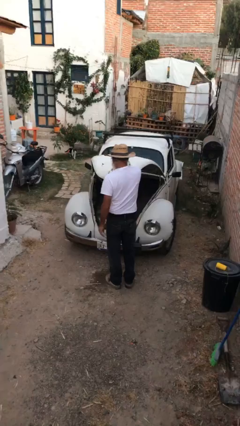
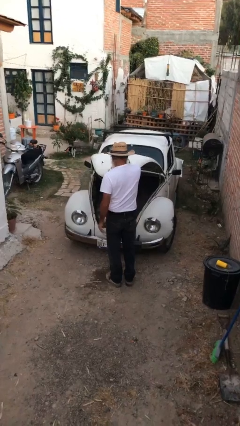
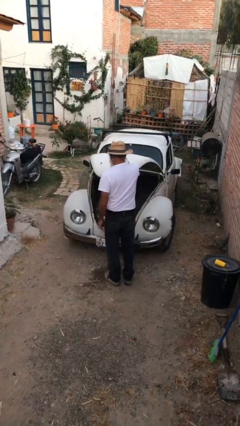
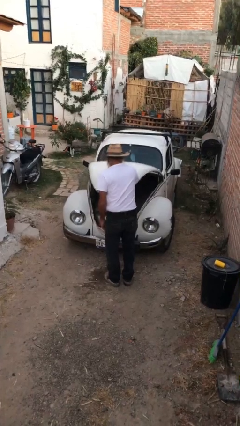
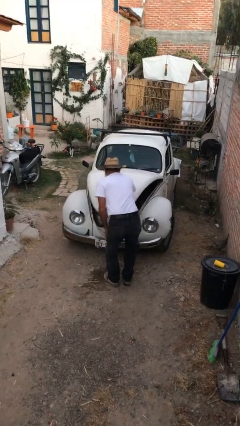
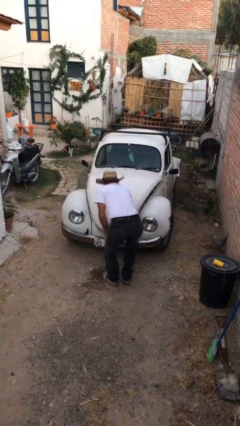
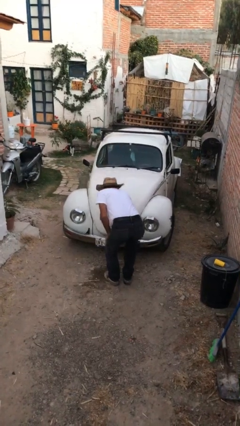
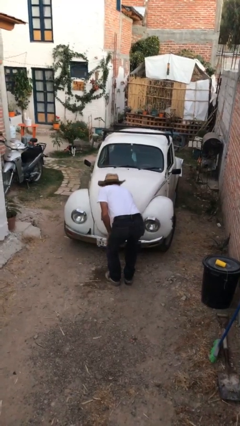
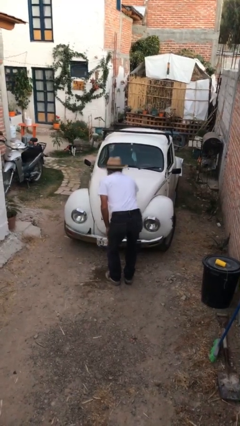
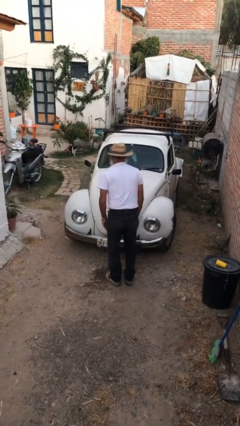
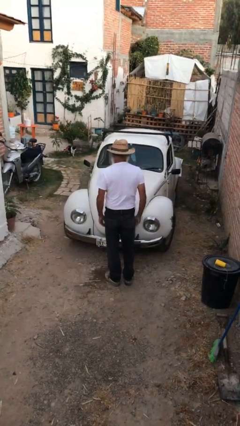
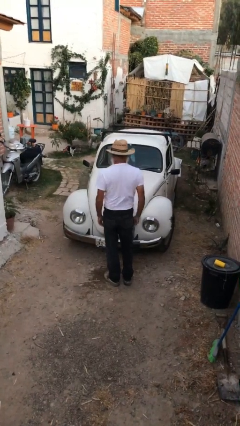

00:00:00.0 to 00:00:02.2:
person closes car trunk

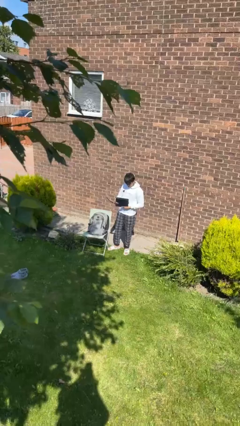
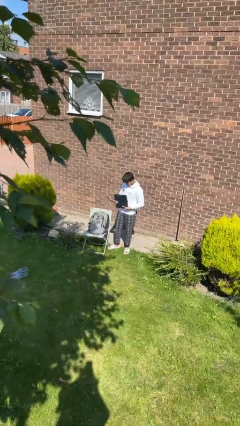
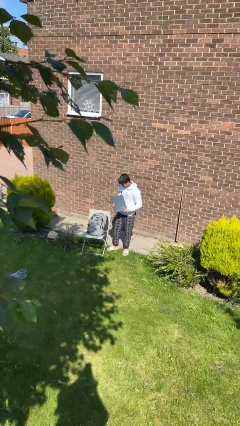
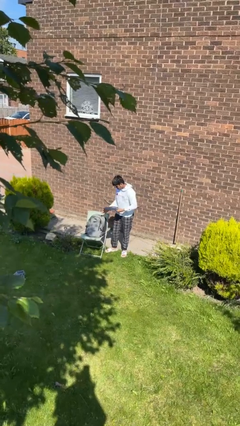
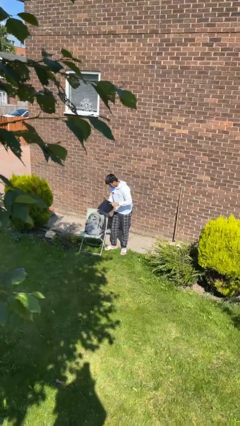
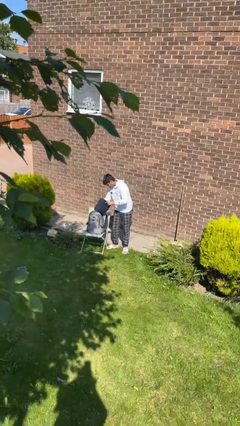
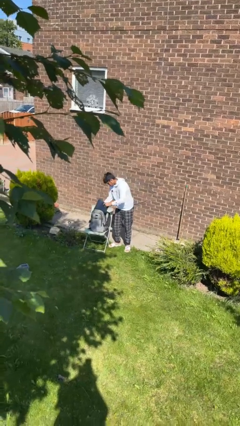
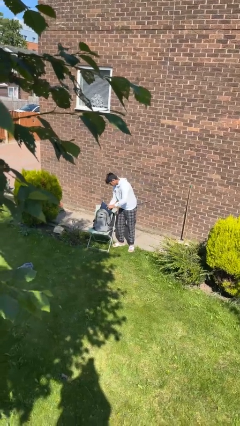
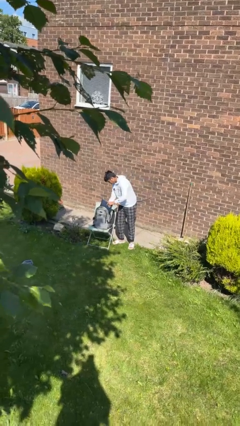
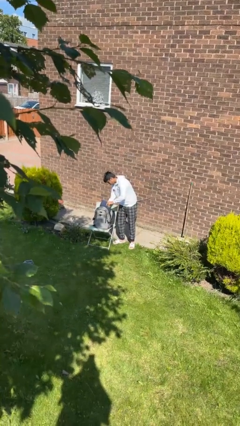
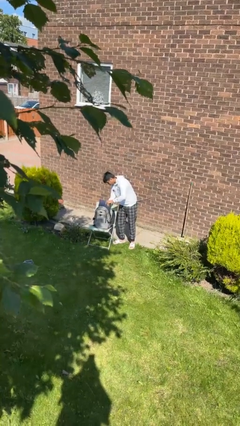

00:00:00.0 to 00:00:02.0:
person puts object into backpack

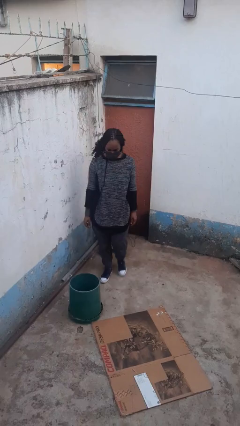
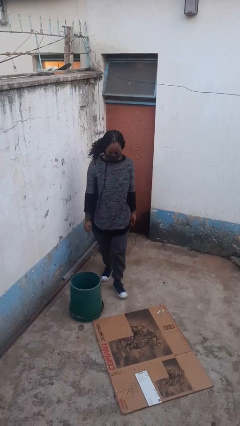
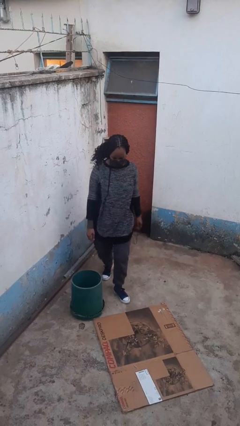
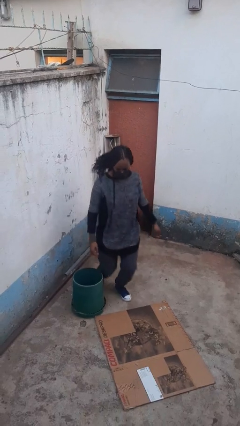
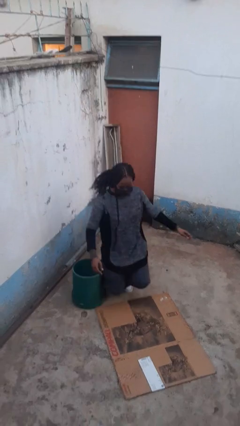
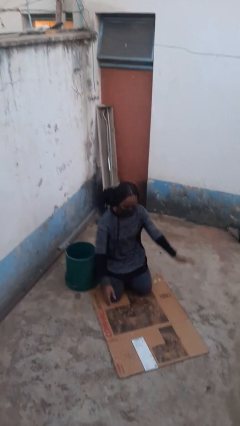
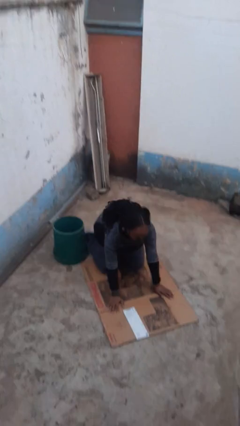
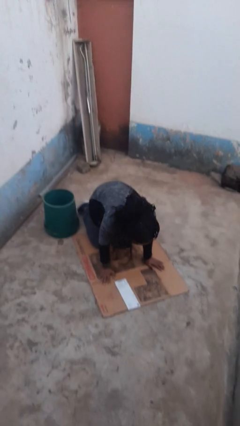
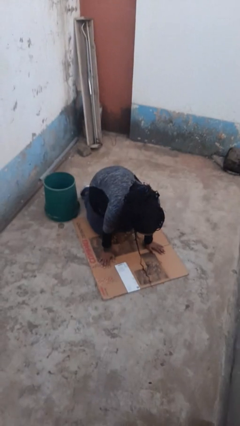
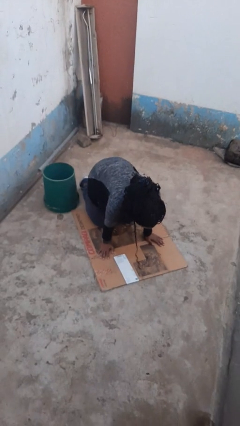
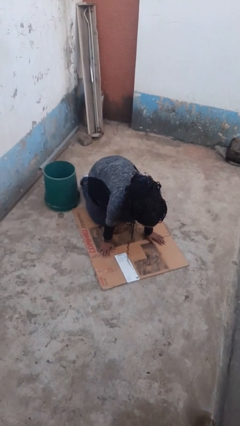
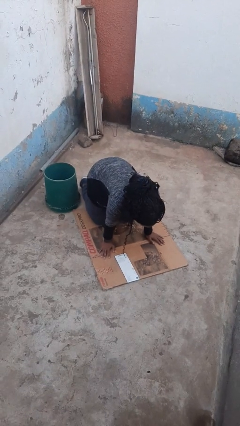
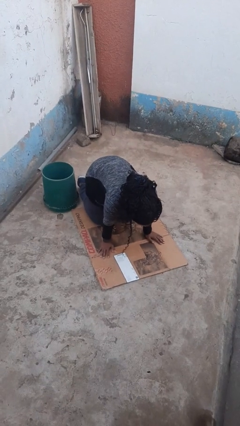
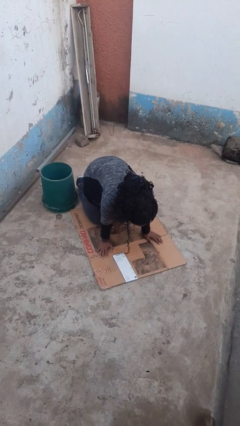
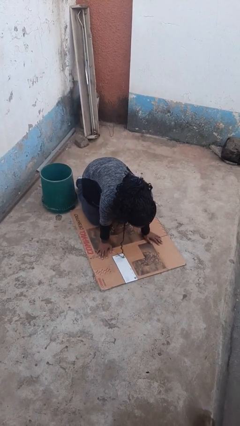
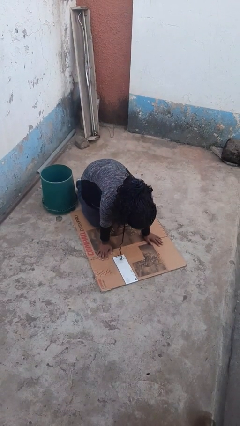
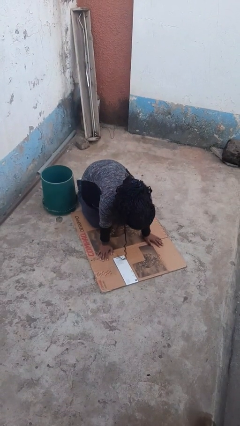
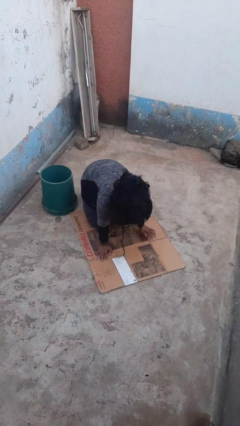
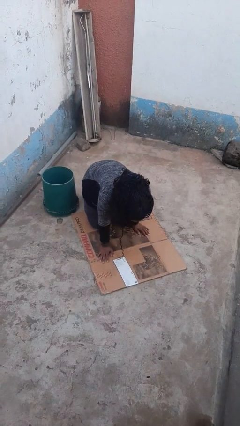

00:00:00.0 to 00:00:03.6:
person trips on object on floor

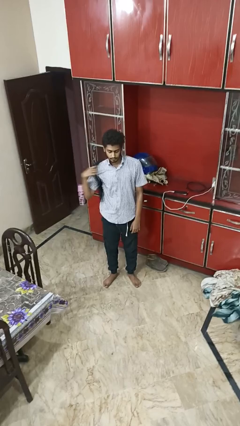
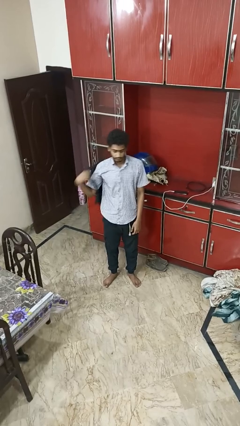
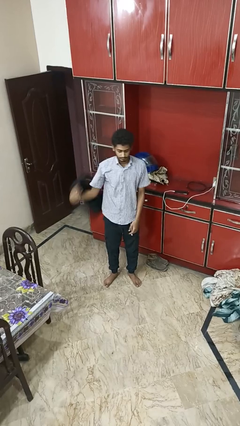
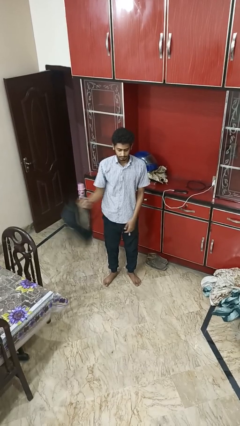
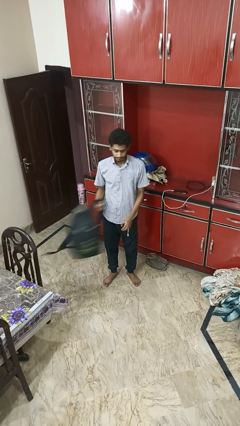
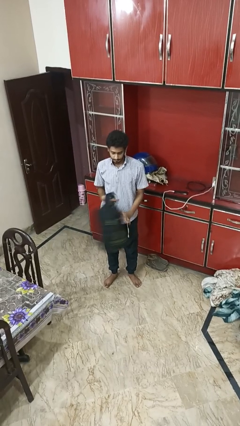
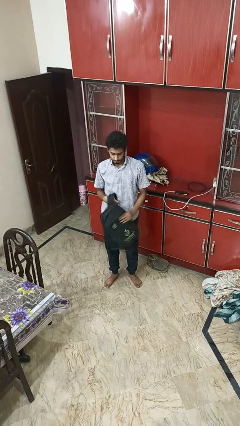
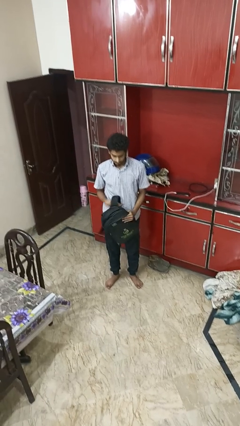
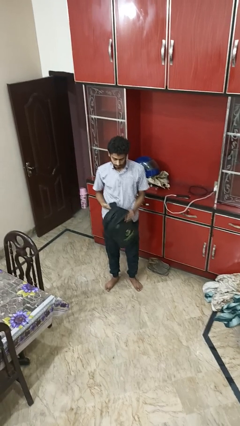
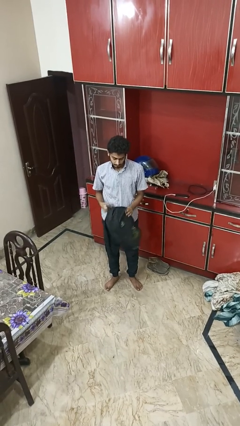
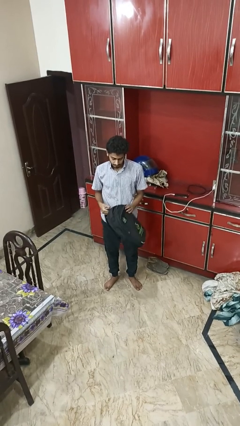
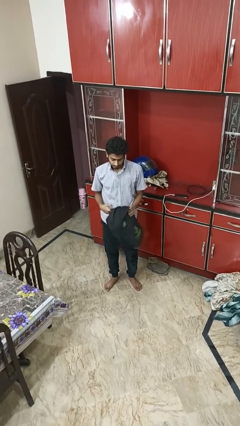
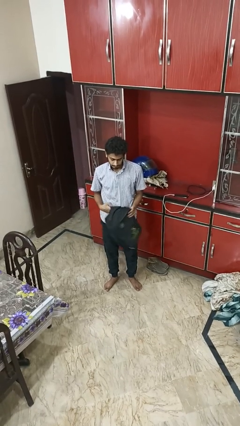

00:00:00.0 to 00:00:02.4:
person takes off backpack

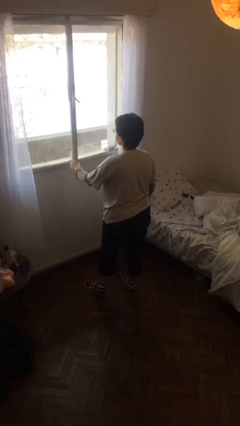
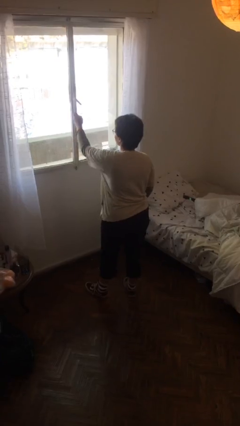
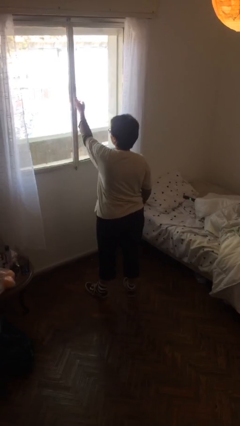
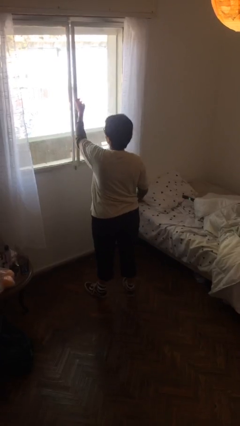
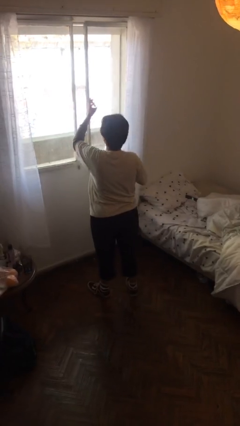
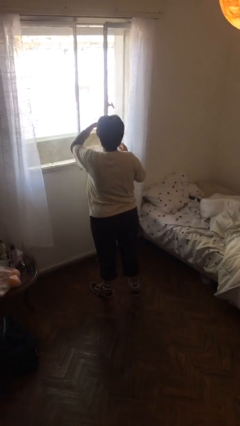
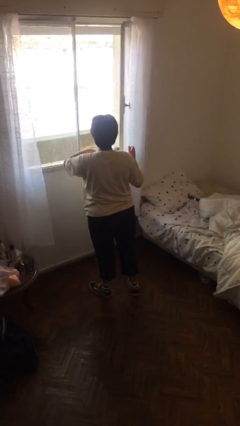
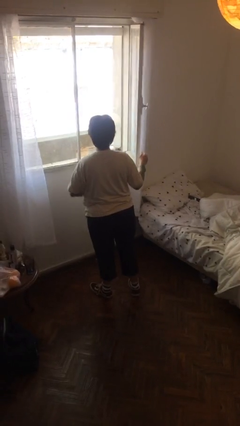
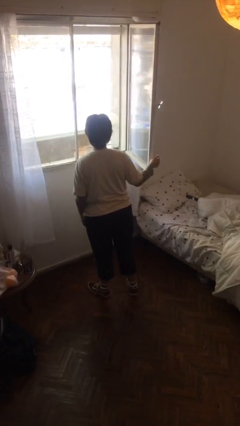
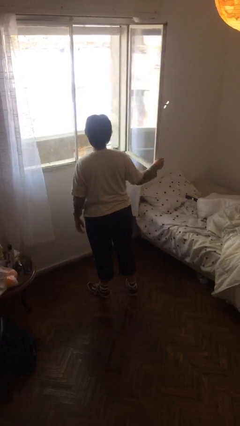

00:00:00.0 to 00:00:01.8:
person opens home window

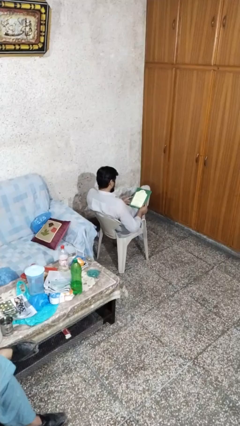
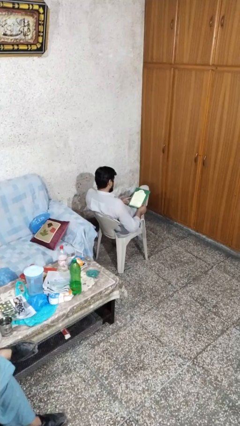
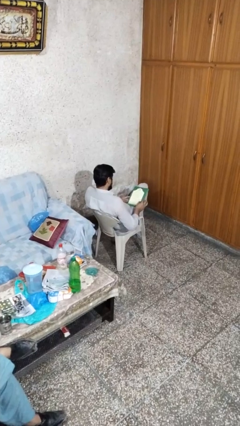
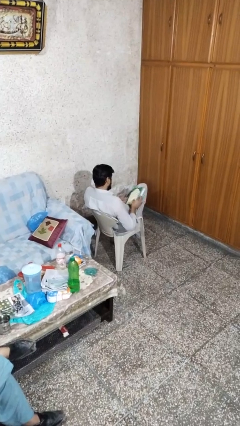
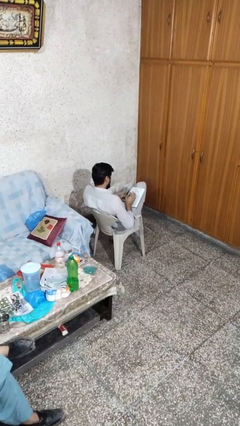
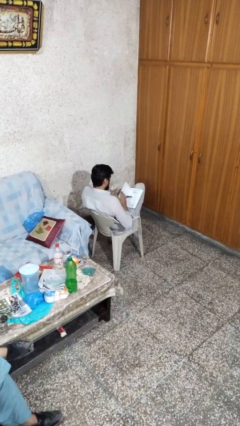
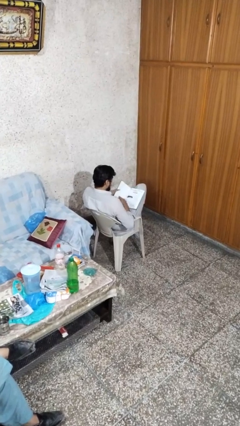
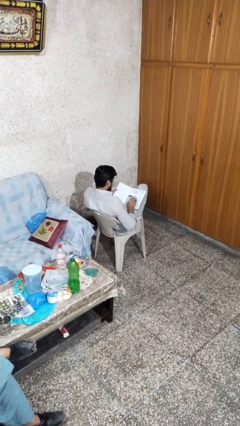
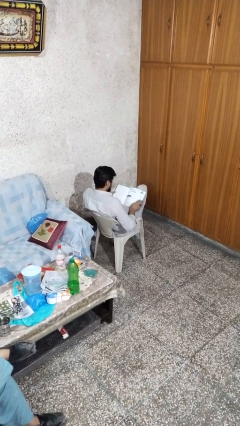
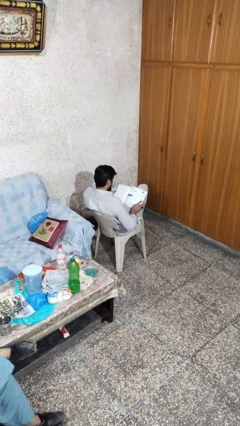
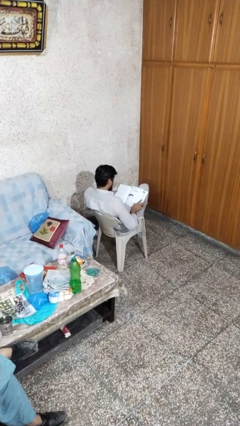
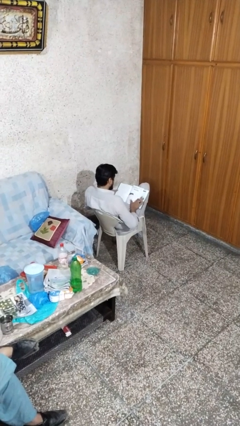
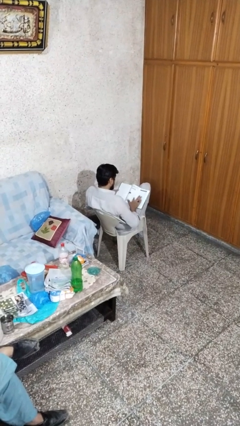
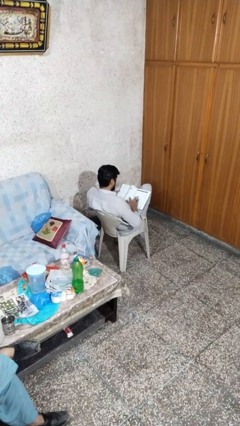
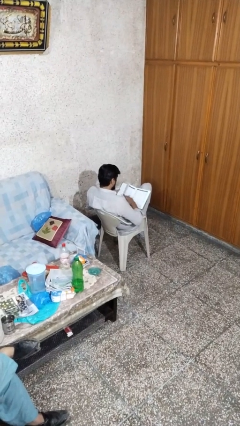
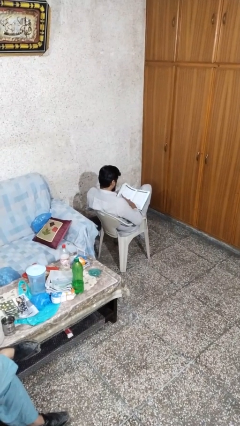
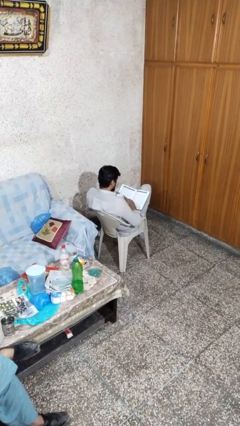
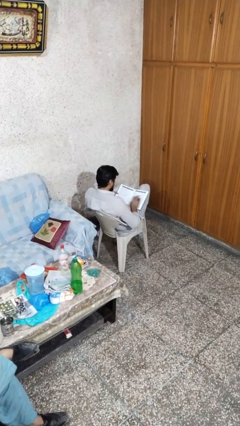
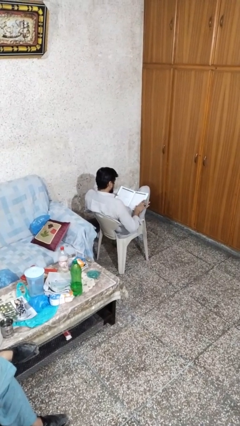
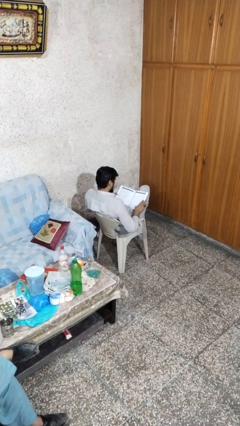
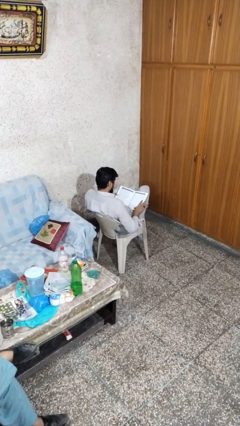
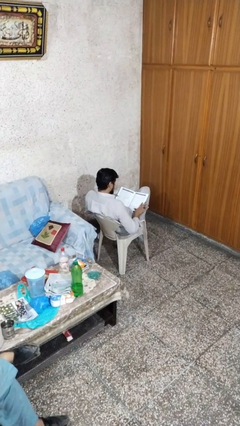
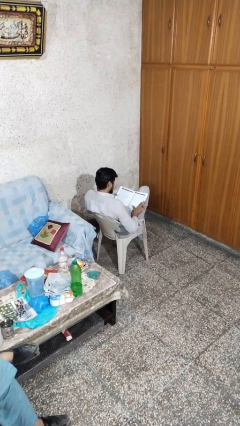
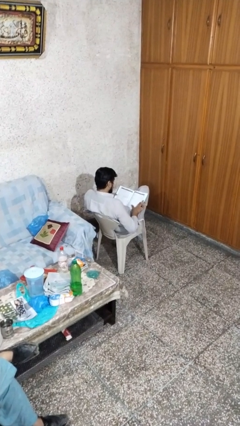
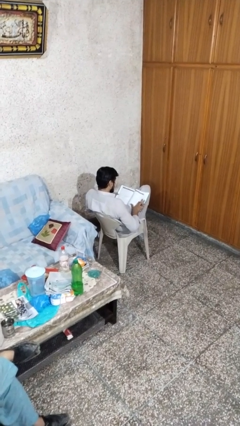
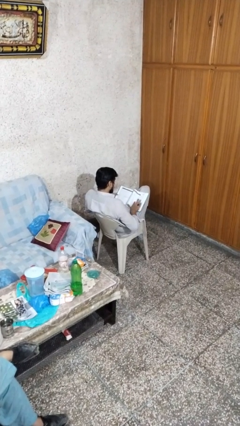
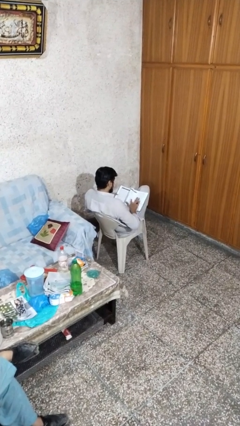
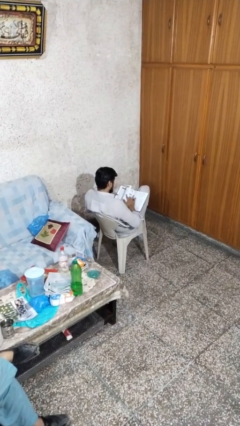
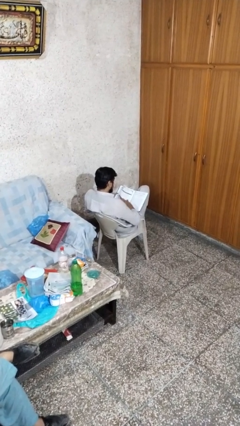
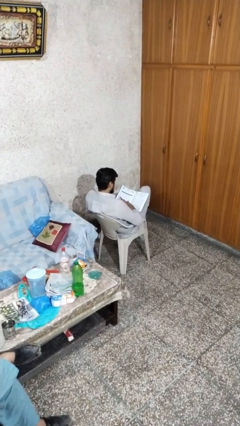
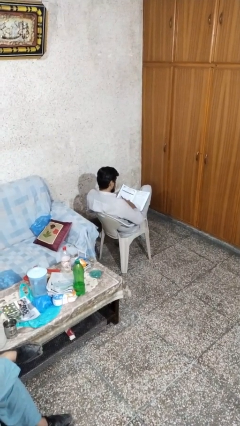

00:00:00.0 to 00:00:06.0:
person reads book
